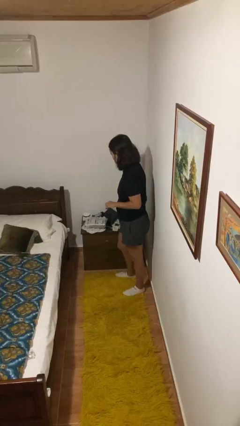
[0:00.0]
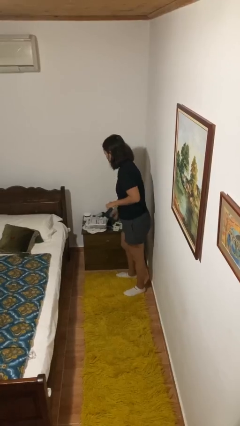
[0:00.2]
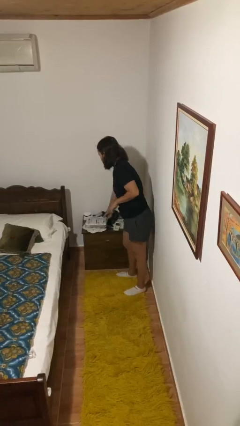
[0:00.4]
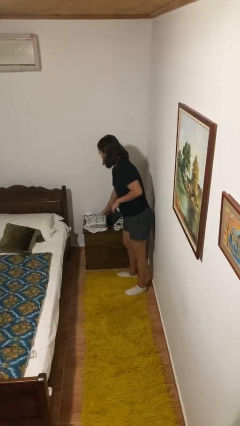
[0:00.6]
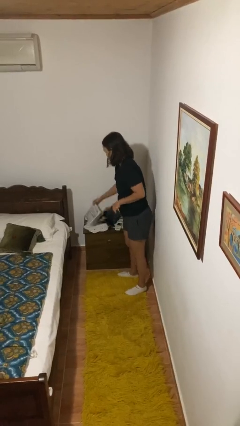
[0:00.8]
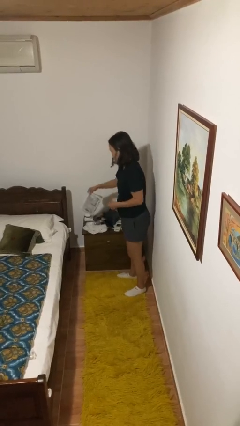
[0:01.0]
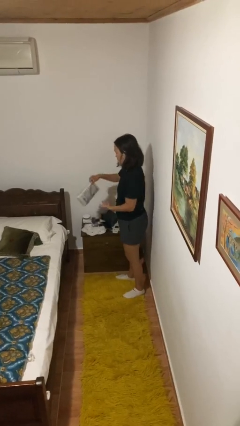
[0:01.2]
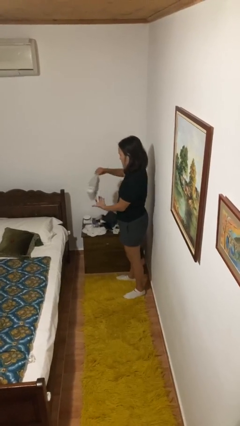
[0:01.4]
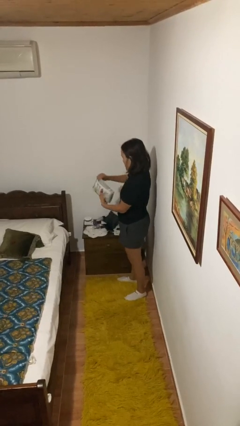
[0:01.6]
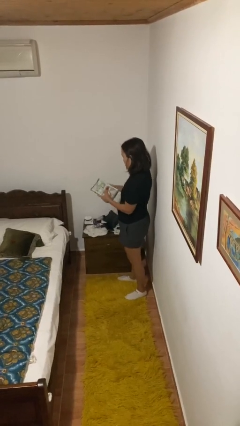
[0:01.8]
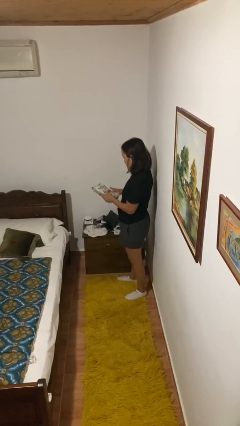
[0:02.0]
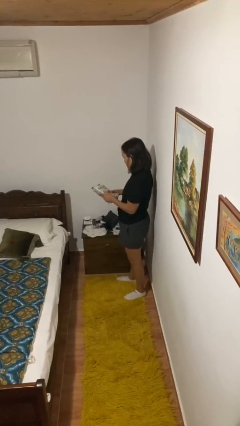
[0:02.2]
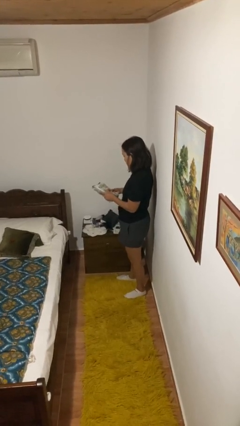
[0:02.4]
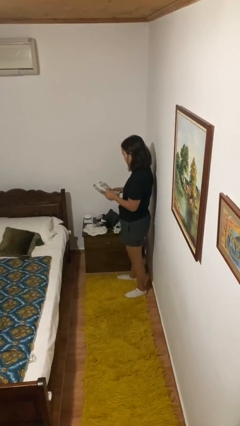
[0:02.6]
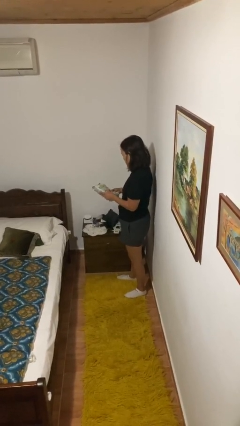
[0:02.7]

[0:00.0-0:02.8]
person picks up object from countertop

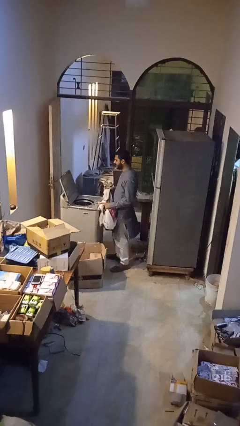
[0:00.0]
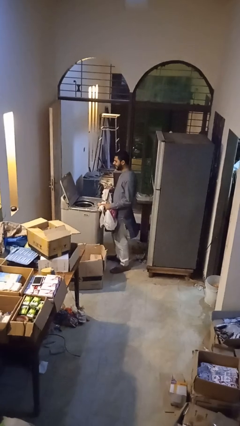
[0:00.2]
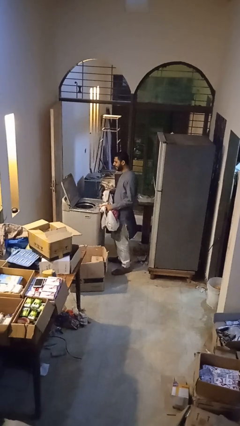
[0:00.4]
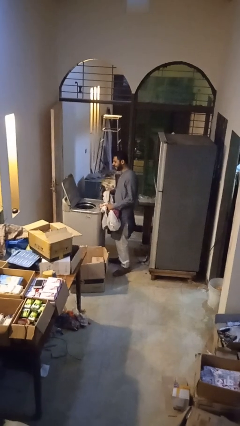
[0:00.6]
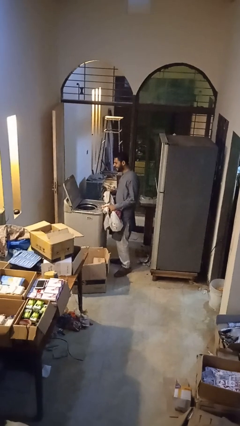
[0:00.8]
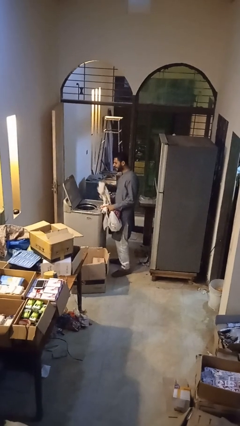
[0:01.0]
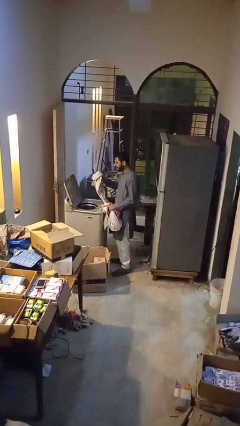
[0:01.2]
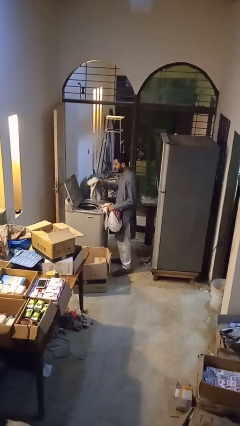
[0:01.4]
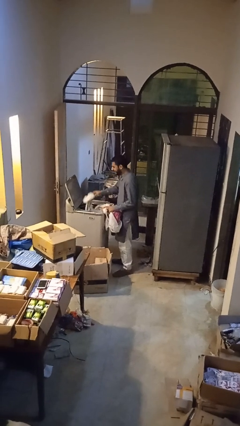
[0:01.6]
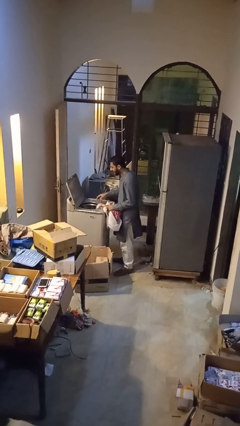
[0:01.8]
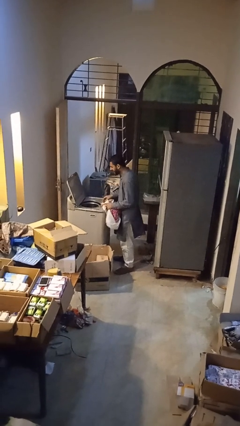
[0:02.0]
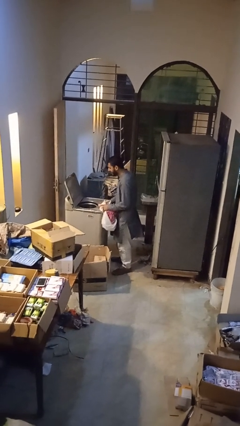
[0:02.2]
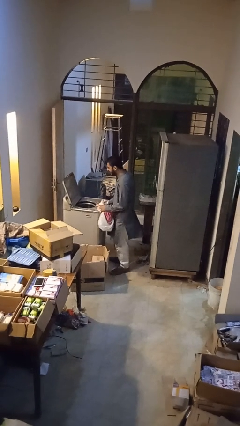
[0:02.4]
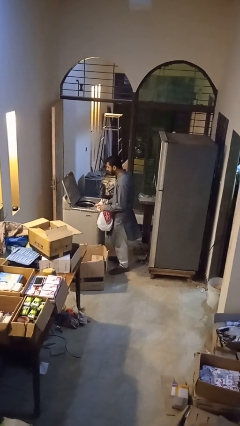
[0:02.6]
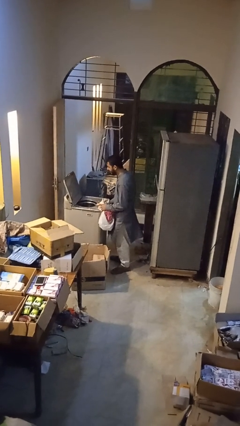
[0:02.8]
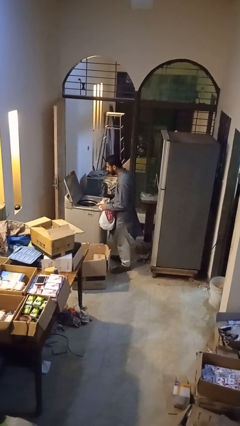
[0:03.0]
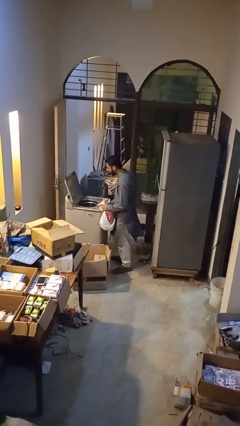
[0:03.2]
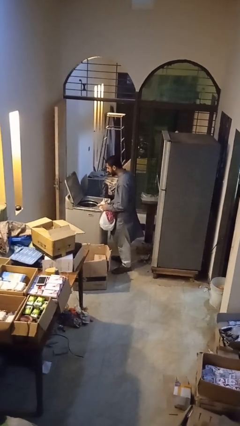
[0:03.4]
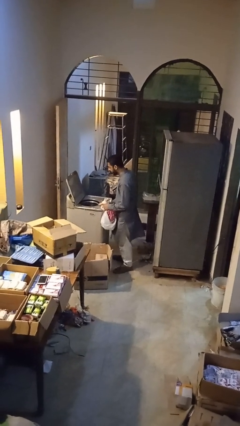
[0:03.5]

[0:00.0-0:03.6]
person loads dryer

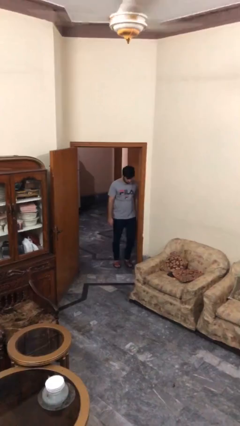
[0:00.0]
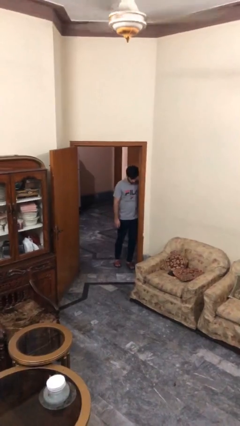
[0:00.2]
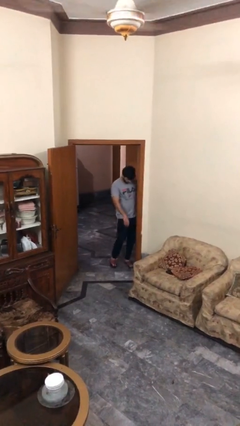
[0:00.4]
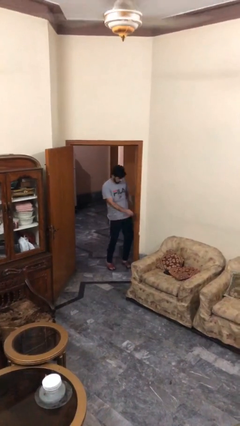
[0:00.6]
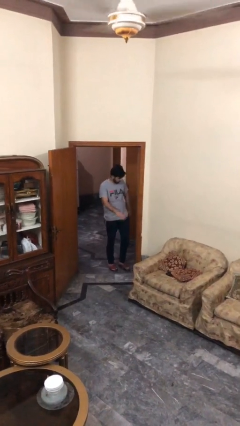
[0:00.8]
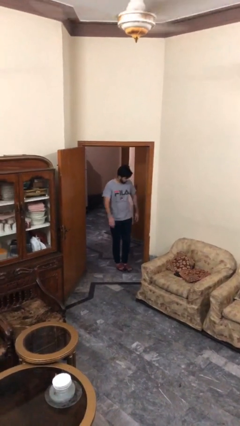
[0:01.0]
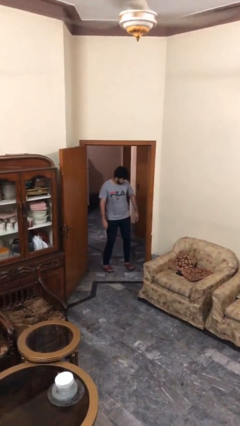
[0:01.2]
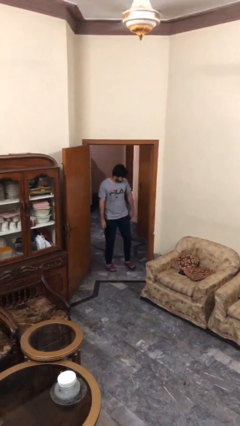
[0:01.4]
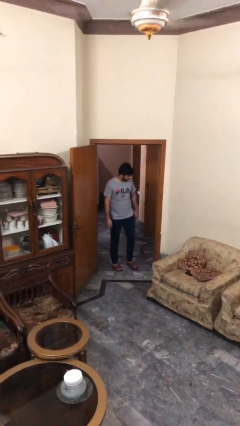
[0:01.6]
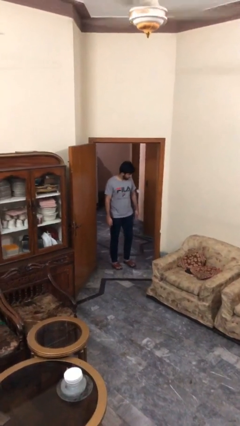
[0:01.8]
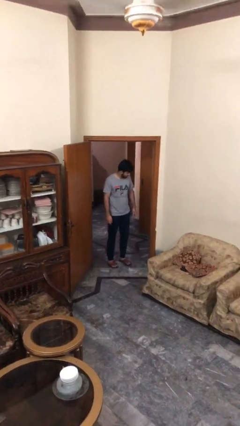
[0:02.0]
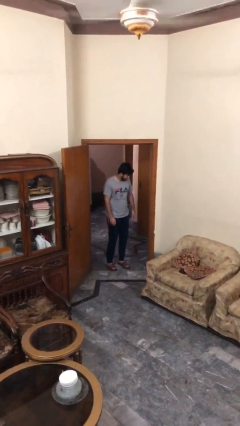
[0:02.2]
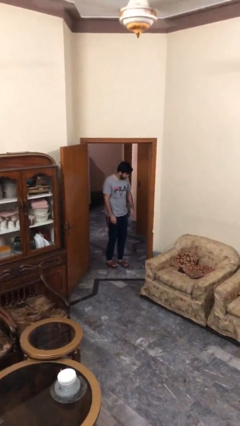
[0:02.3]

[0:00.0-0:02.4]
person bumps into wall

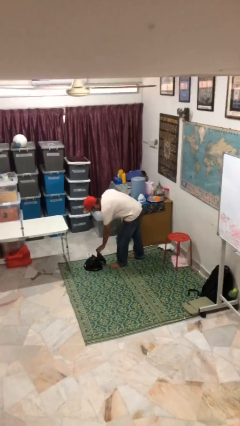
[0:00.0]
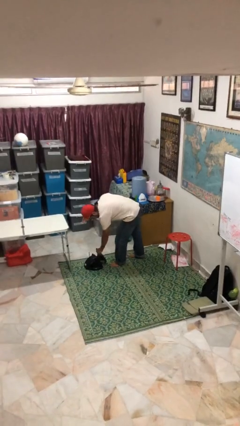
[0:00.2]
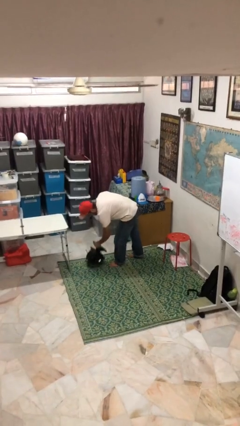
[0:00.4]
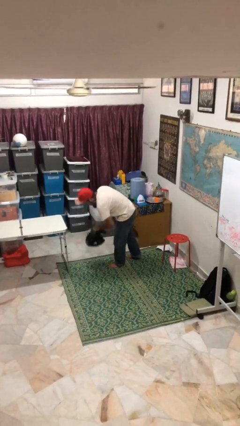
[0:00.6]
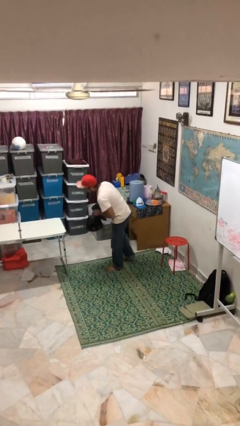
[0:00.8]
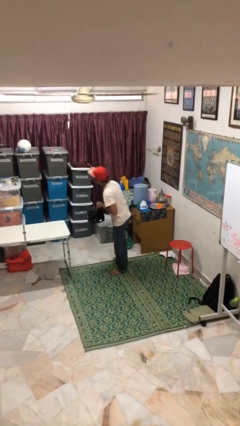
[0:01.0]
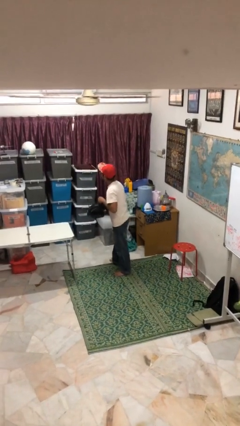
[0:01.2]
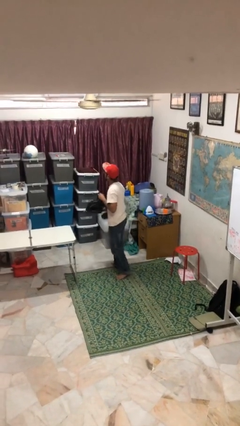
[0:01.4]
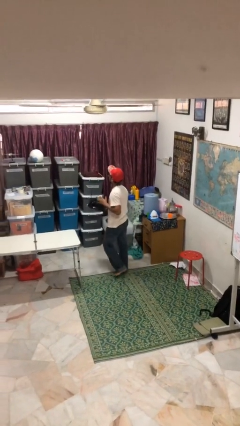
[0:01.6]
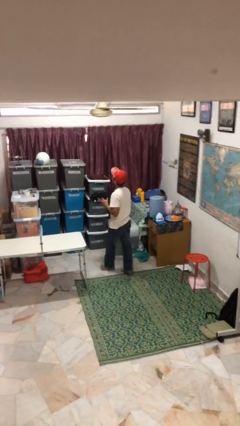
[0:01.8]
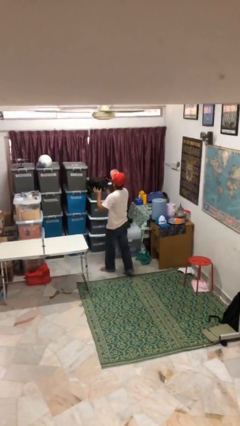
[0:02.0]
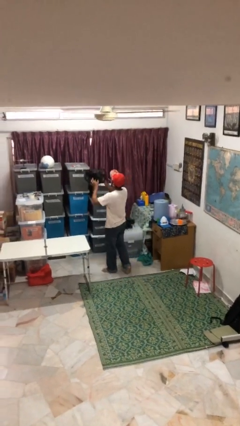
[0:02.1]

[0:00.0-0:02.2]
person picks up object from floor

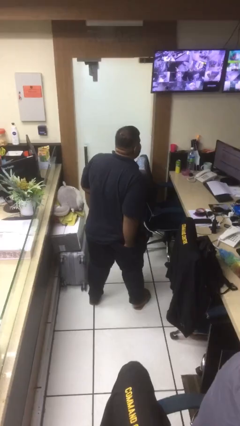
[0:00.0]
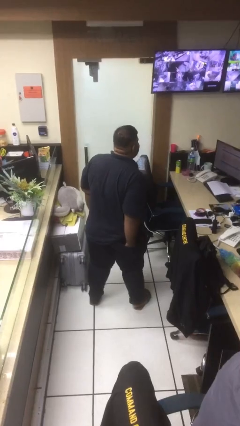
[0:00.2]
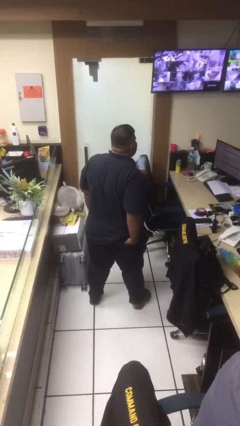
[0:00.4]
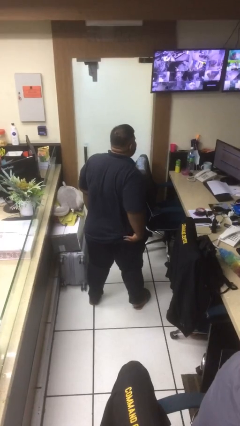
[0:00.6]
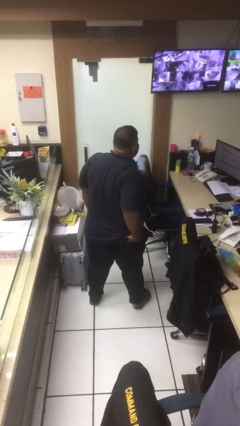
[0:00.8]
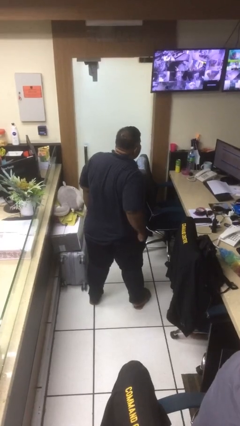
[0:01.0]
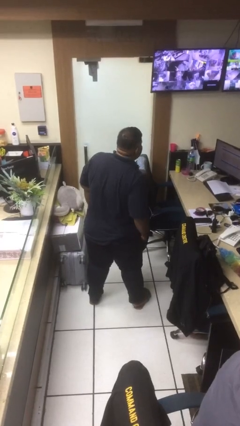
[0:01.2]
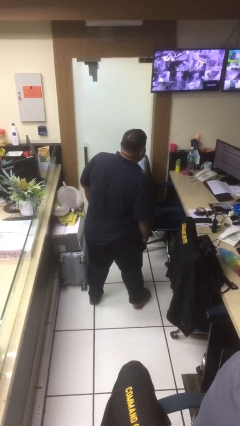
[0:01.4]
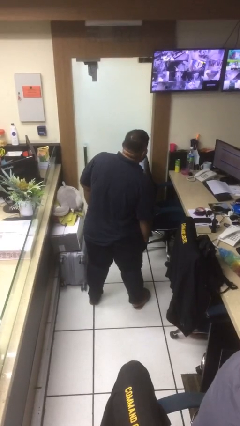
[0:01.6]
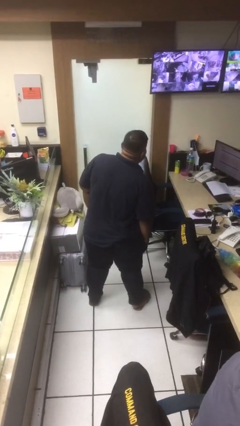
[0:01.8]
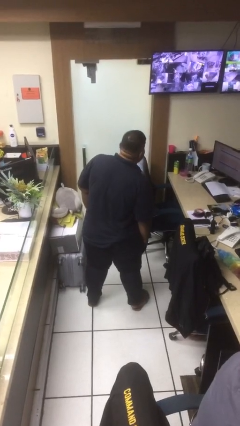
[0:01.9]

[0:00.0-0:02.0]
person puts hands in back pockets

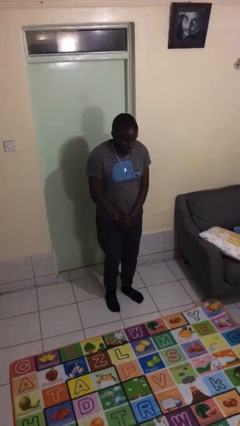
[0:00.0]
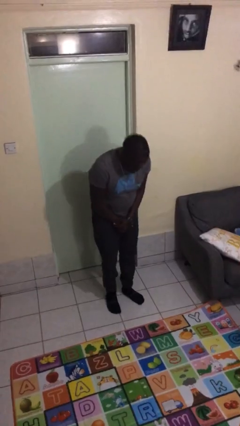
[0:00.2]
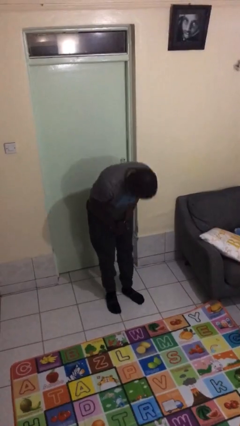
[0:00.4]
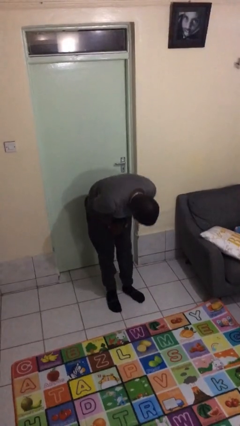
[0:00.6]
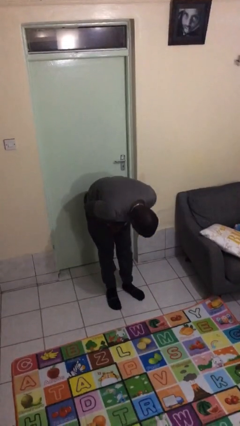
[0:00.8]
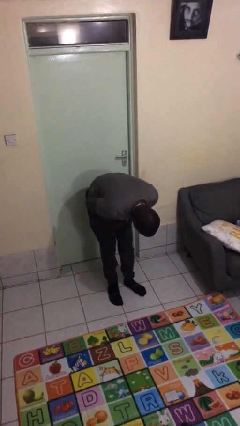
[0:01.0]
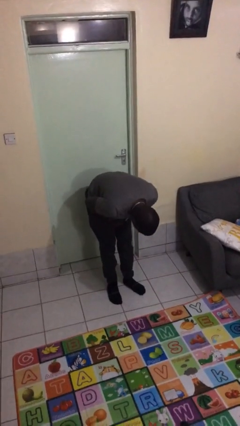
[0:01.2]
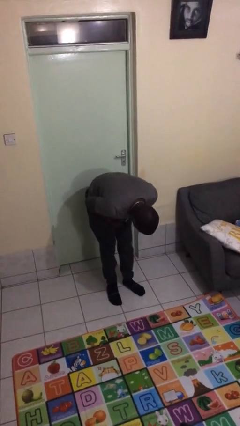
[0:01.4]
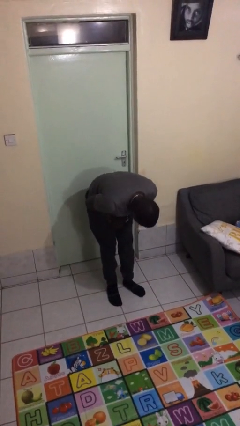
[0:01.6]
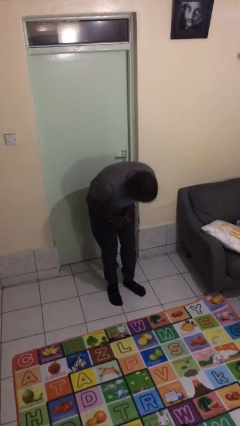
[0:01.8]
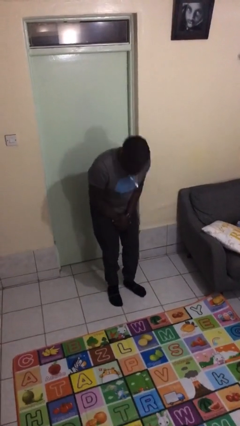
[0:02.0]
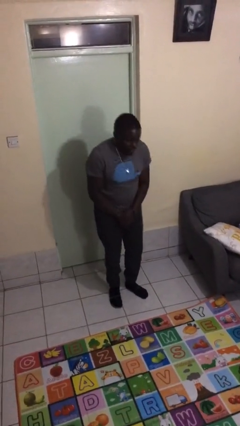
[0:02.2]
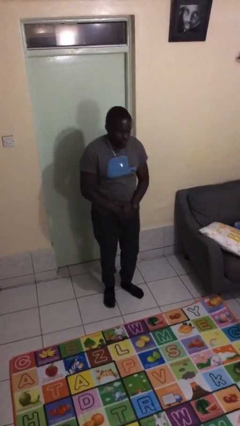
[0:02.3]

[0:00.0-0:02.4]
person bows

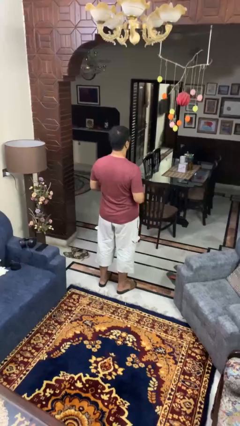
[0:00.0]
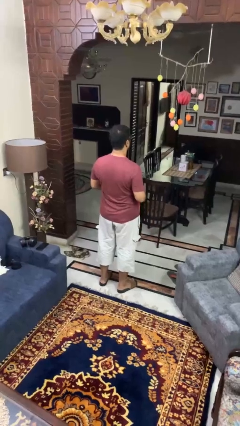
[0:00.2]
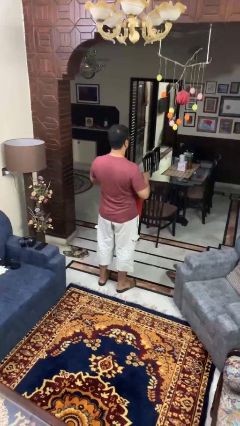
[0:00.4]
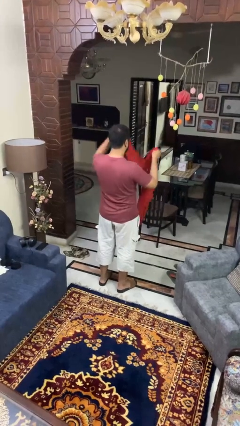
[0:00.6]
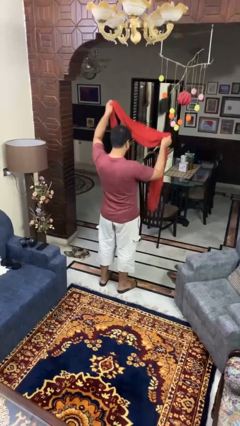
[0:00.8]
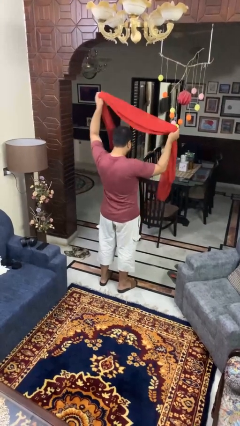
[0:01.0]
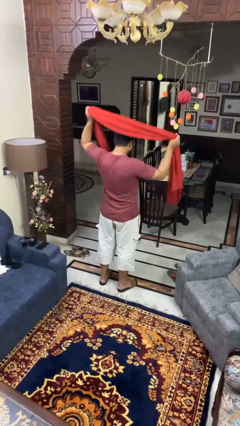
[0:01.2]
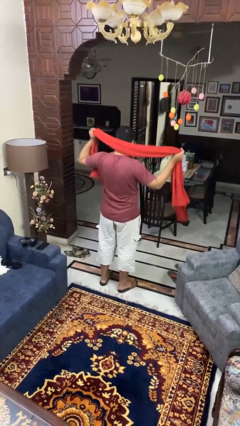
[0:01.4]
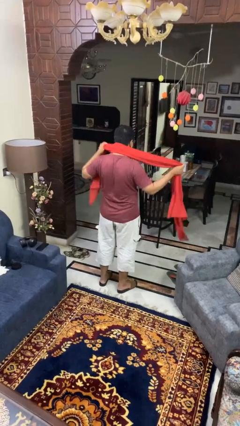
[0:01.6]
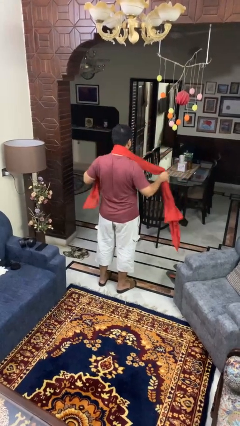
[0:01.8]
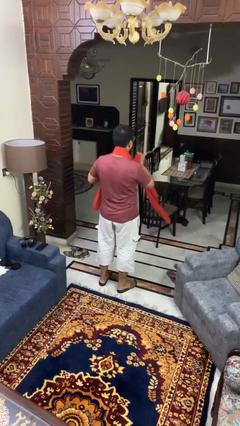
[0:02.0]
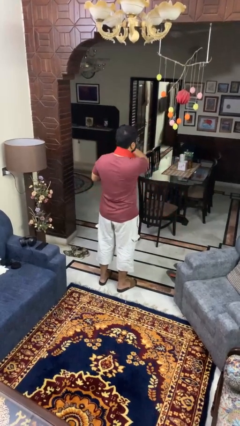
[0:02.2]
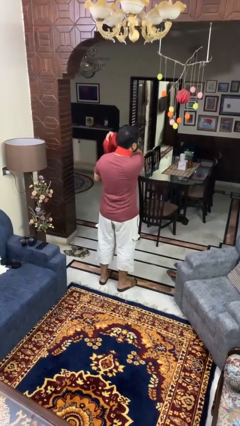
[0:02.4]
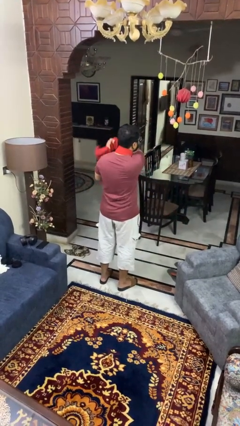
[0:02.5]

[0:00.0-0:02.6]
person puts on scarf
